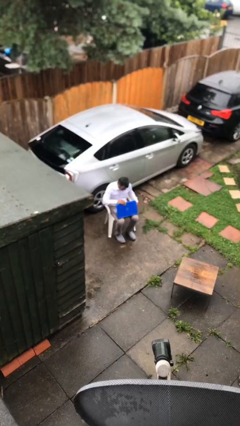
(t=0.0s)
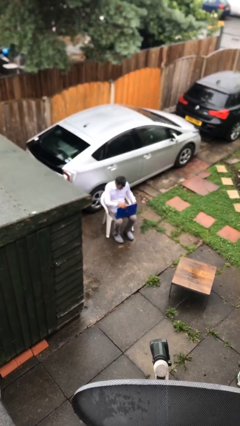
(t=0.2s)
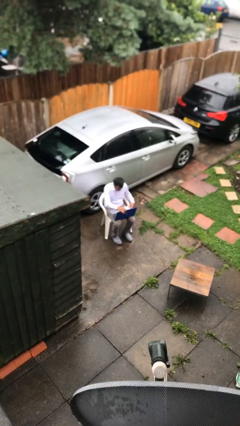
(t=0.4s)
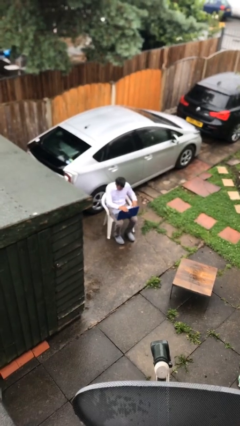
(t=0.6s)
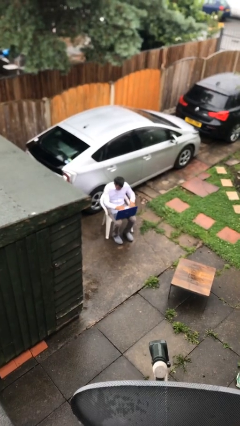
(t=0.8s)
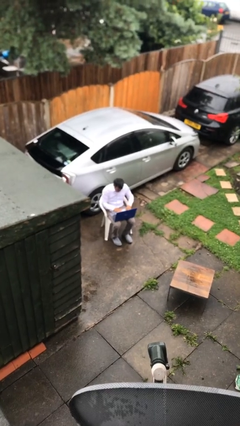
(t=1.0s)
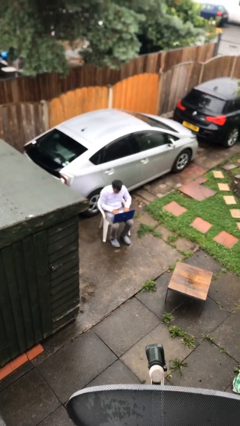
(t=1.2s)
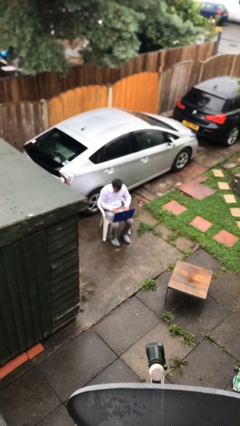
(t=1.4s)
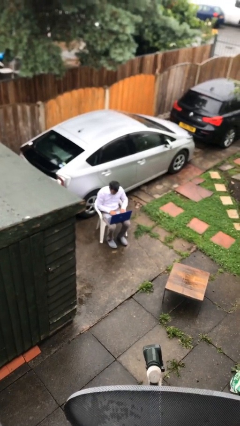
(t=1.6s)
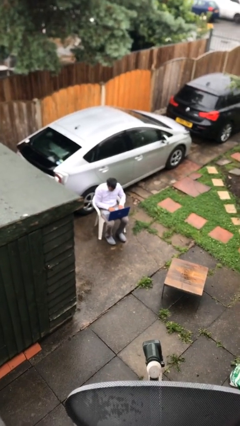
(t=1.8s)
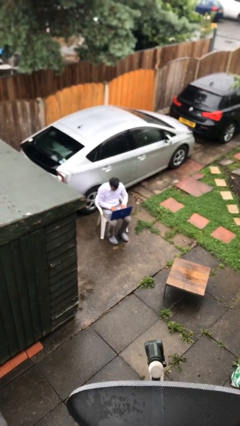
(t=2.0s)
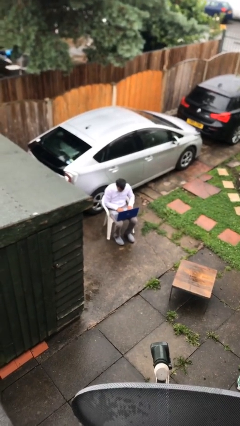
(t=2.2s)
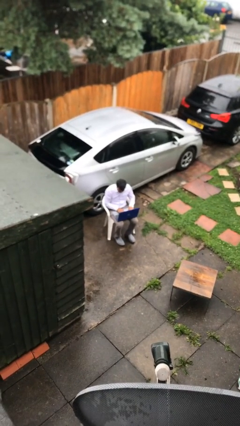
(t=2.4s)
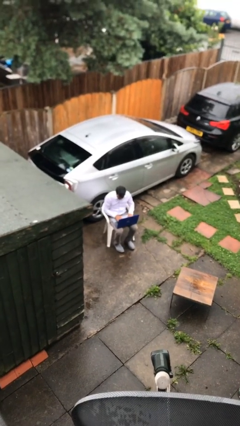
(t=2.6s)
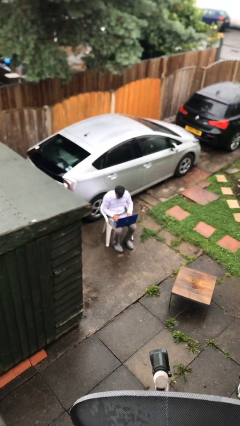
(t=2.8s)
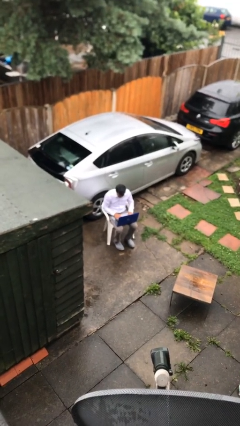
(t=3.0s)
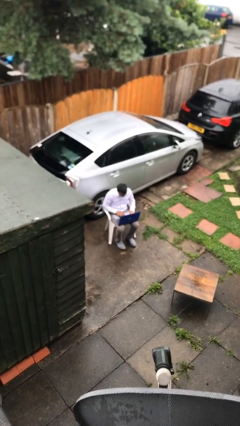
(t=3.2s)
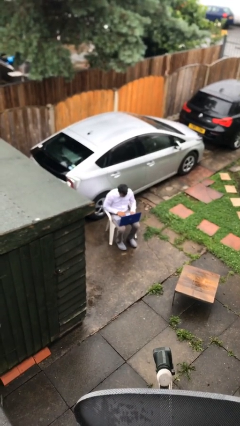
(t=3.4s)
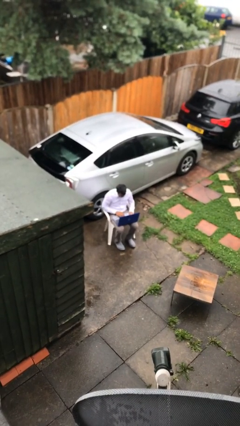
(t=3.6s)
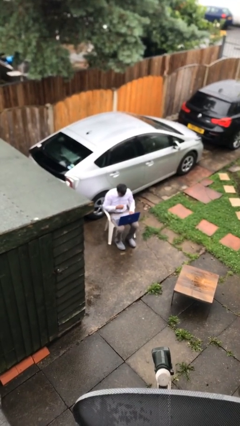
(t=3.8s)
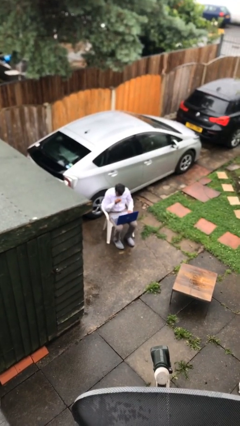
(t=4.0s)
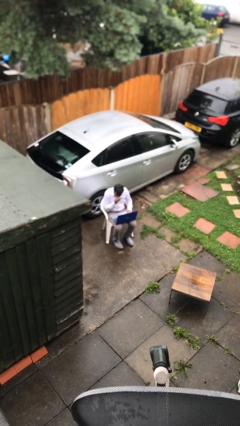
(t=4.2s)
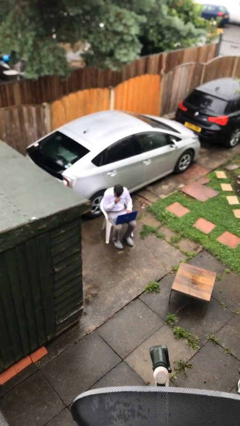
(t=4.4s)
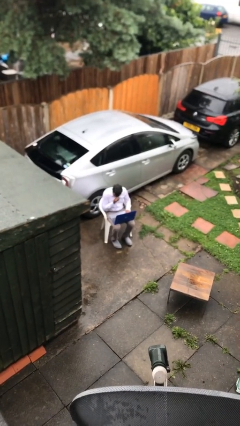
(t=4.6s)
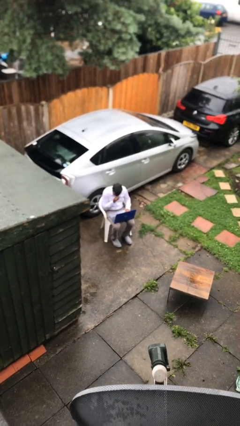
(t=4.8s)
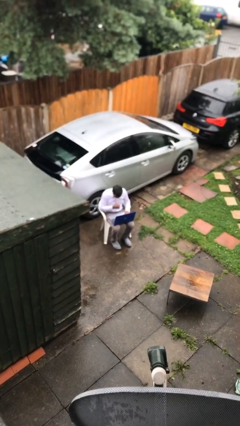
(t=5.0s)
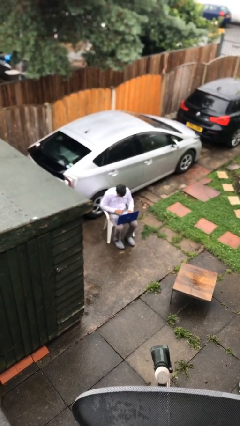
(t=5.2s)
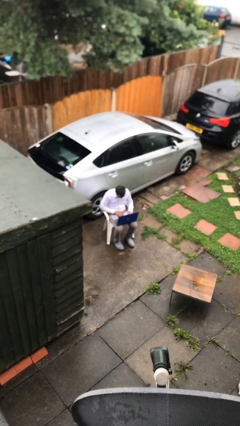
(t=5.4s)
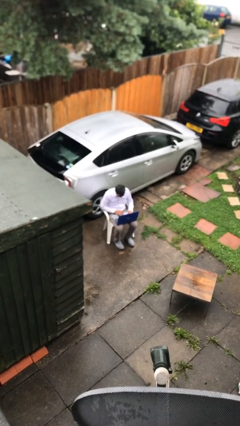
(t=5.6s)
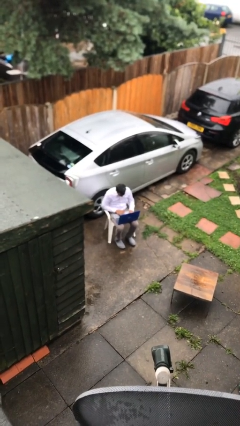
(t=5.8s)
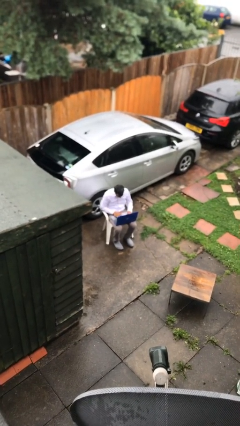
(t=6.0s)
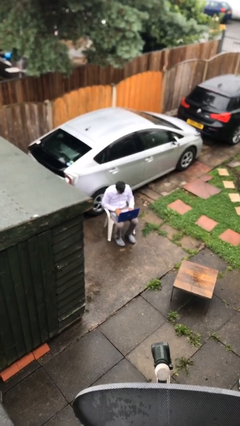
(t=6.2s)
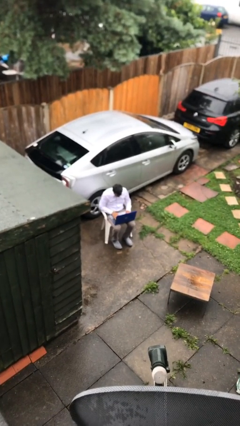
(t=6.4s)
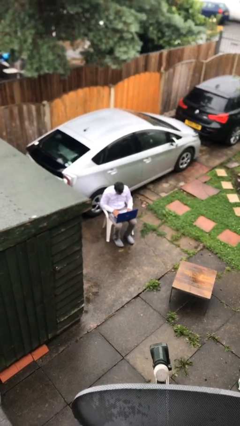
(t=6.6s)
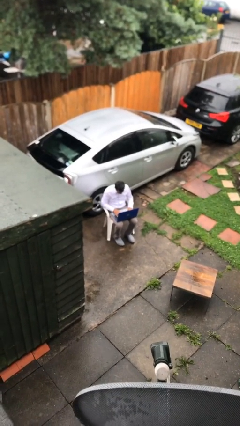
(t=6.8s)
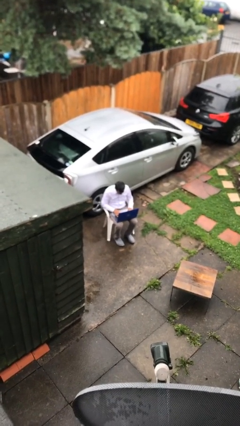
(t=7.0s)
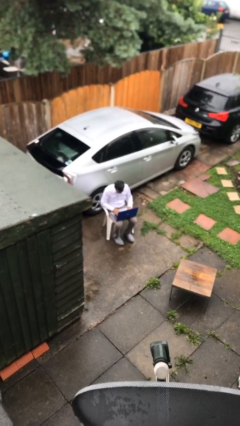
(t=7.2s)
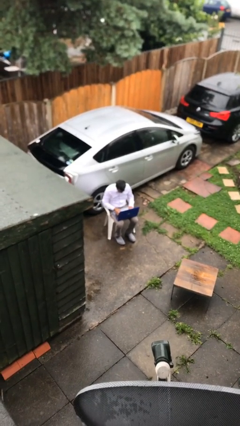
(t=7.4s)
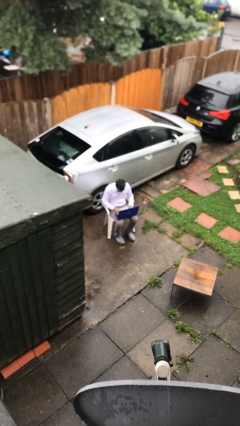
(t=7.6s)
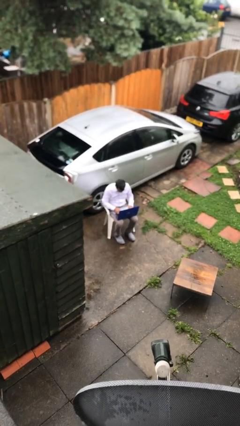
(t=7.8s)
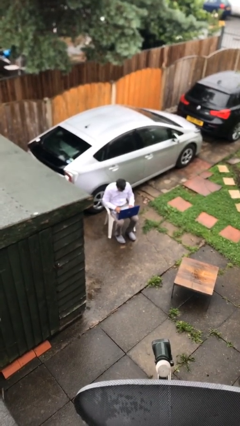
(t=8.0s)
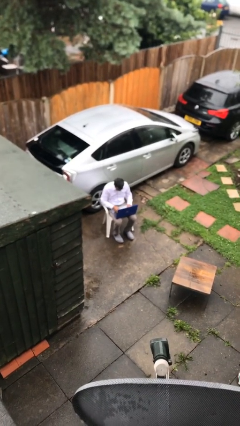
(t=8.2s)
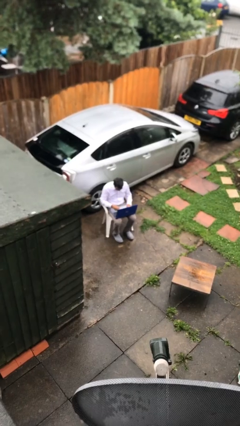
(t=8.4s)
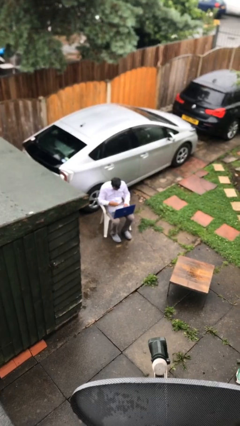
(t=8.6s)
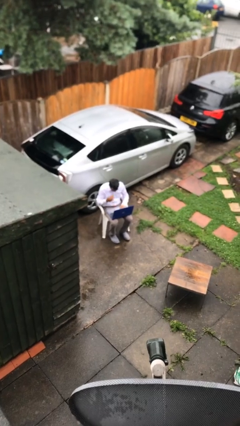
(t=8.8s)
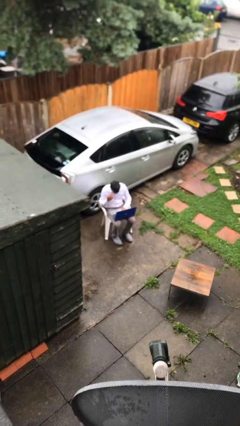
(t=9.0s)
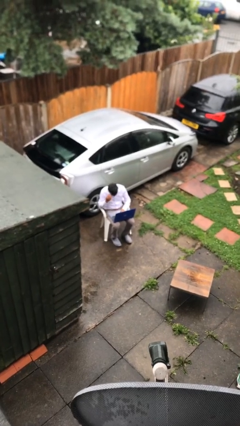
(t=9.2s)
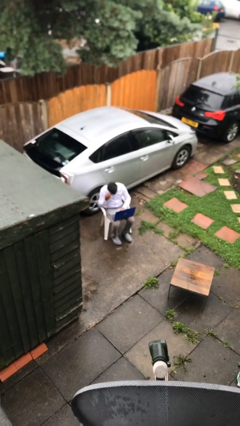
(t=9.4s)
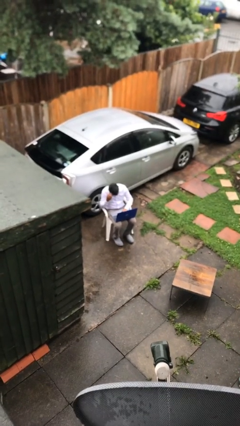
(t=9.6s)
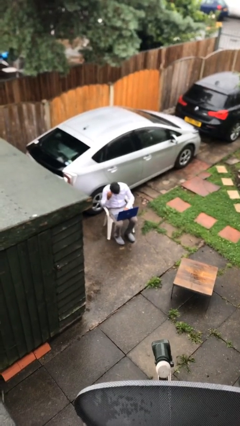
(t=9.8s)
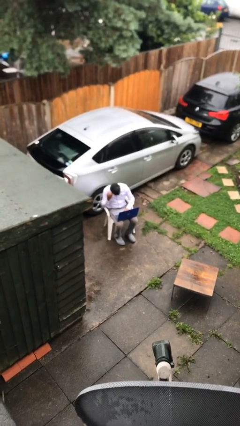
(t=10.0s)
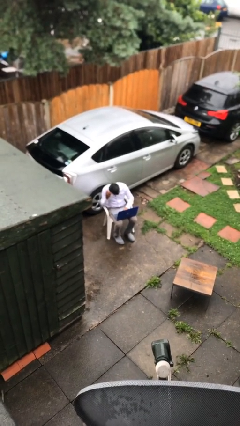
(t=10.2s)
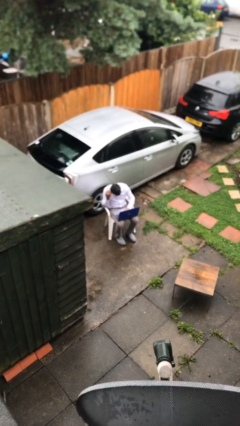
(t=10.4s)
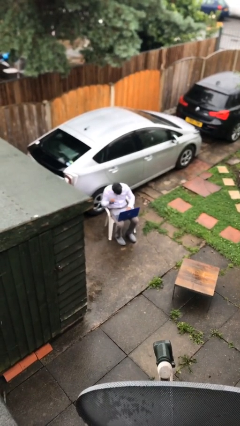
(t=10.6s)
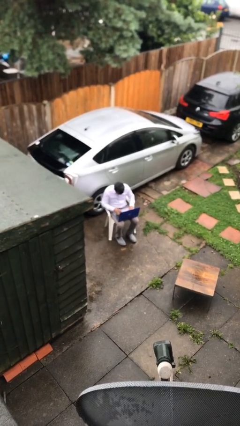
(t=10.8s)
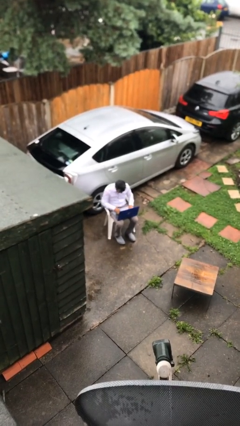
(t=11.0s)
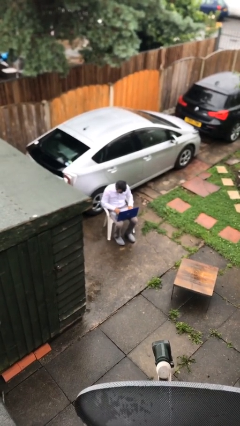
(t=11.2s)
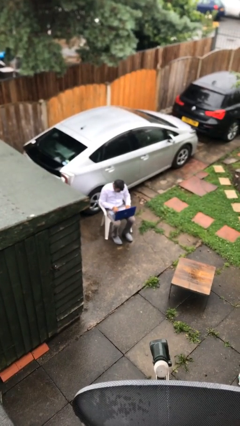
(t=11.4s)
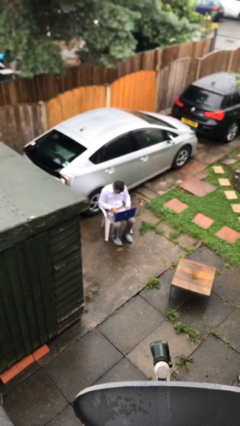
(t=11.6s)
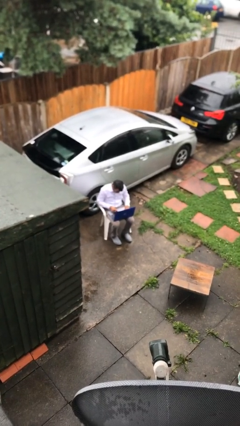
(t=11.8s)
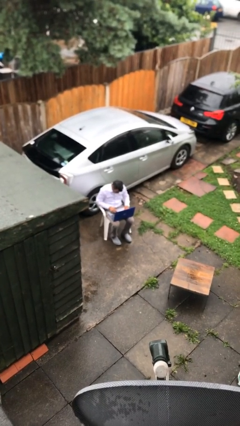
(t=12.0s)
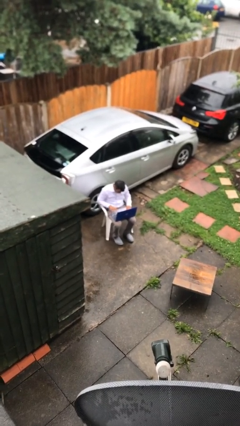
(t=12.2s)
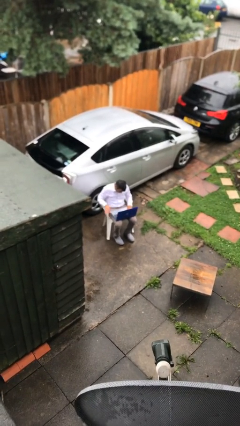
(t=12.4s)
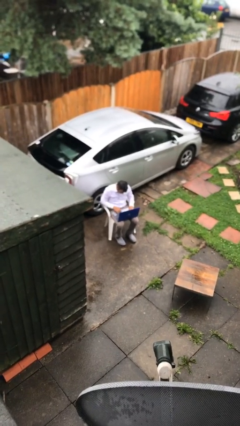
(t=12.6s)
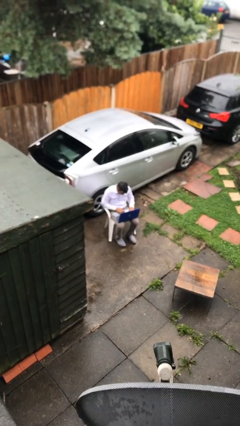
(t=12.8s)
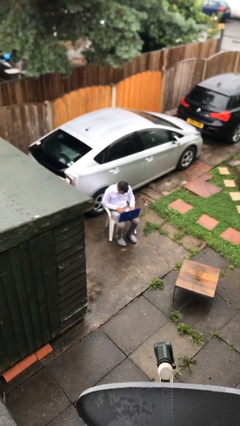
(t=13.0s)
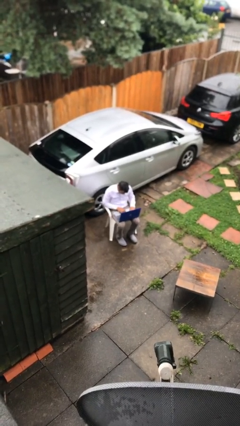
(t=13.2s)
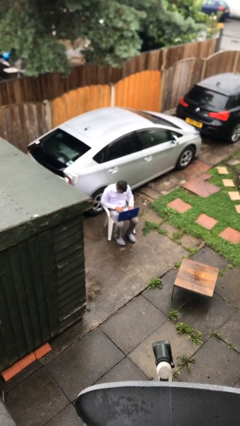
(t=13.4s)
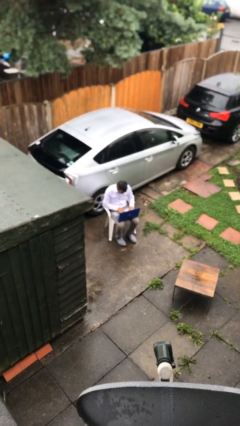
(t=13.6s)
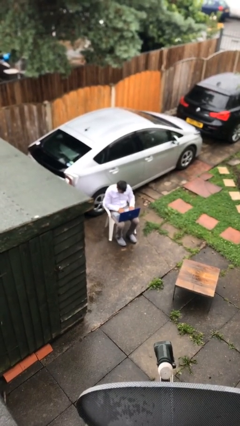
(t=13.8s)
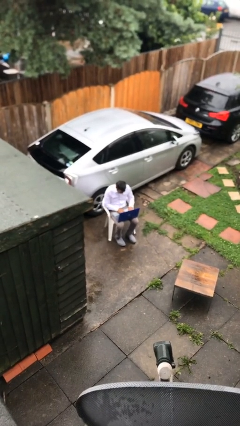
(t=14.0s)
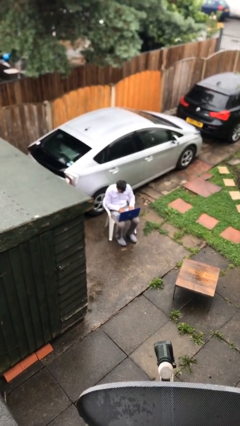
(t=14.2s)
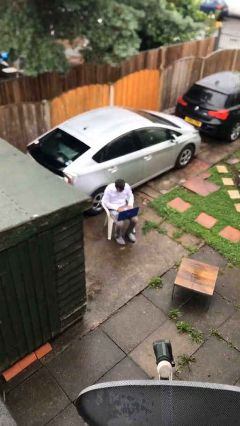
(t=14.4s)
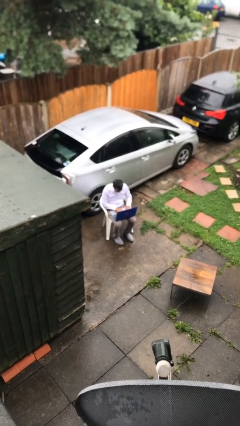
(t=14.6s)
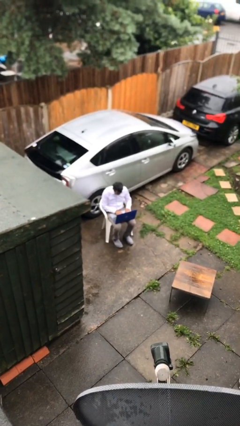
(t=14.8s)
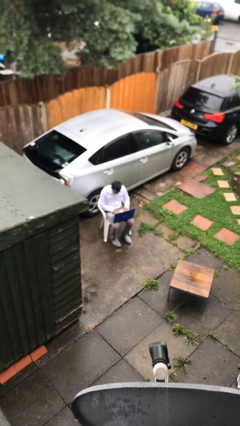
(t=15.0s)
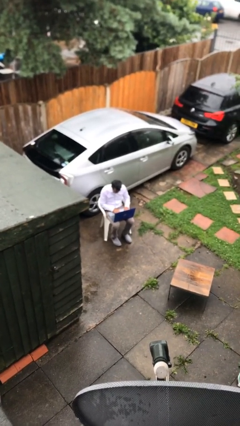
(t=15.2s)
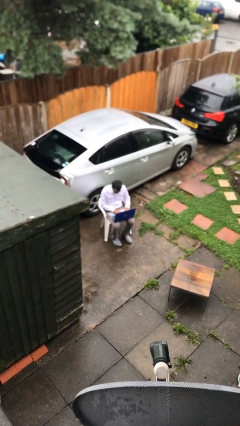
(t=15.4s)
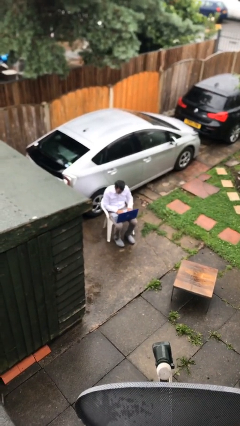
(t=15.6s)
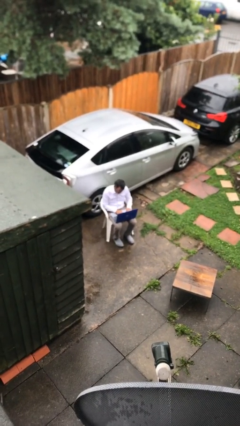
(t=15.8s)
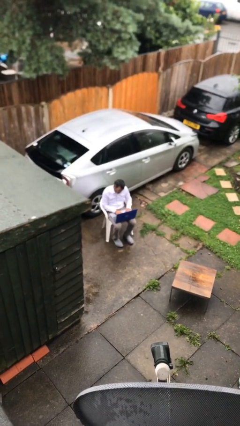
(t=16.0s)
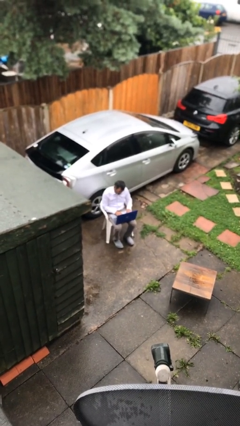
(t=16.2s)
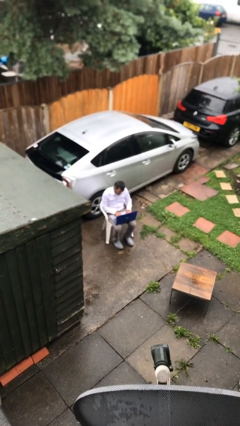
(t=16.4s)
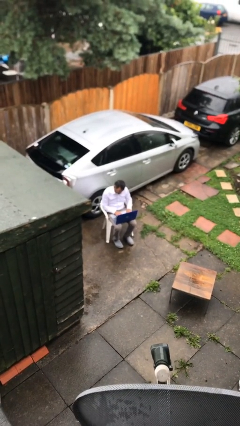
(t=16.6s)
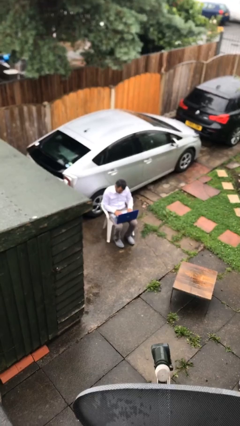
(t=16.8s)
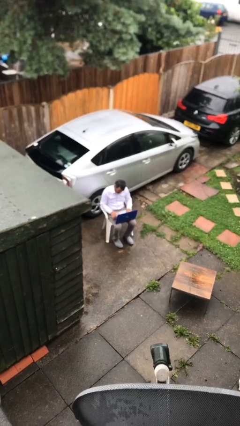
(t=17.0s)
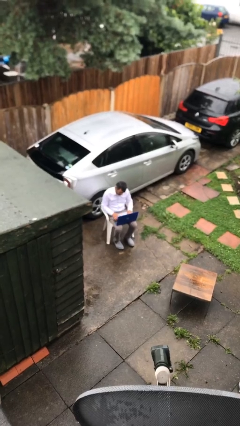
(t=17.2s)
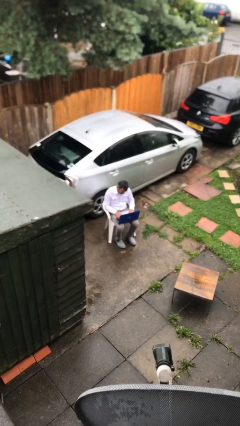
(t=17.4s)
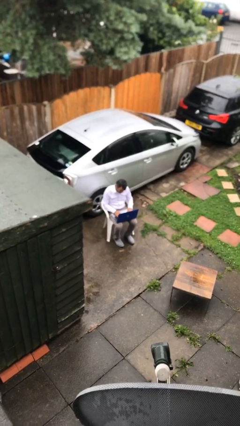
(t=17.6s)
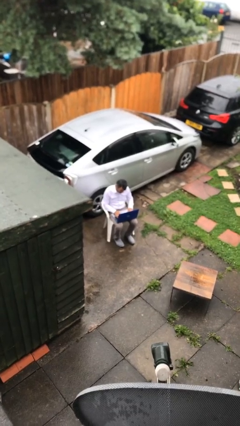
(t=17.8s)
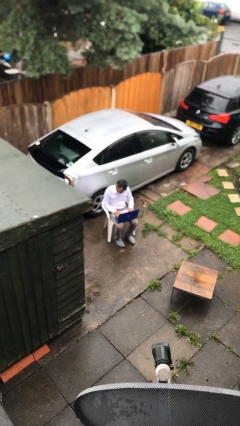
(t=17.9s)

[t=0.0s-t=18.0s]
person interacts with laptop

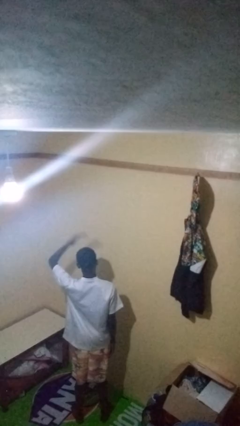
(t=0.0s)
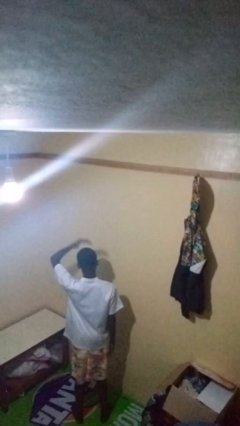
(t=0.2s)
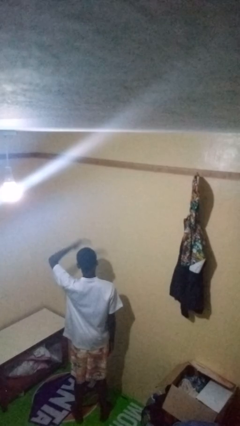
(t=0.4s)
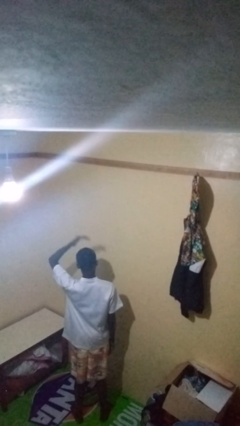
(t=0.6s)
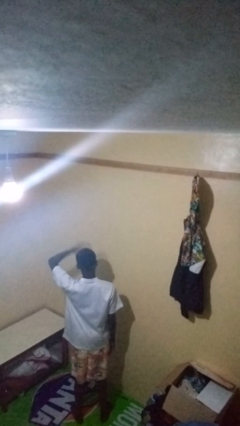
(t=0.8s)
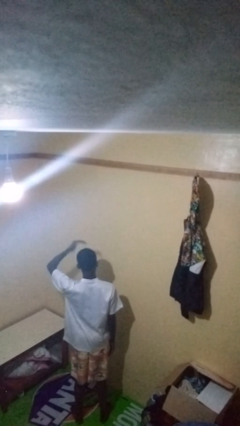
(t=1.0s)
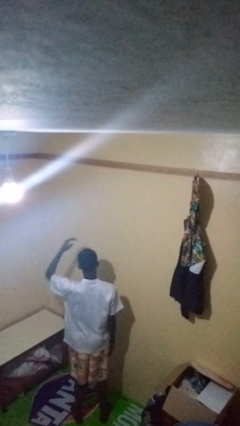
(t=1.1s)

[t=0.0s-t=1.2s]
person pats head
